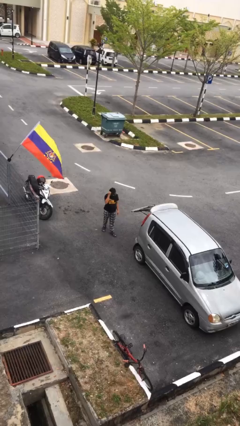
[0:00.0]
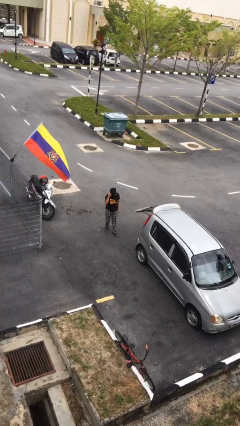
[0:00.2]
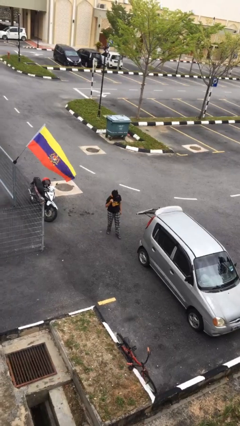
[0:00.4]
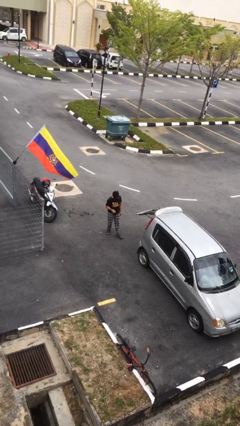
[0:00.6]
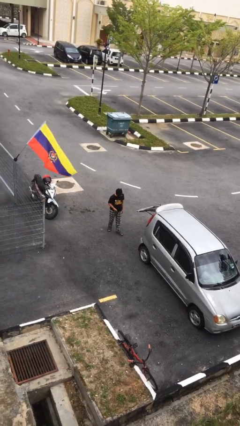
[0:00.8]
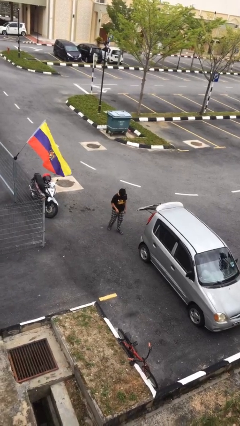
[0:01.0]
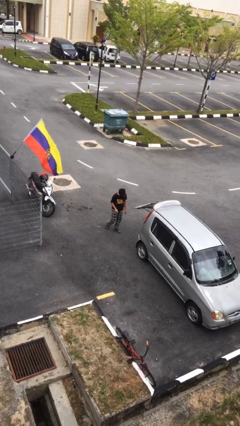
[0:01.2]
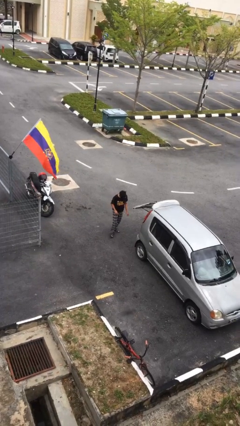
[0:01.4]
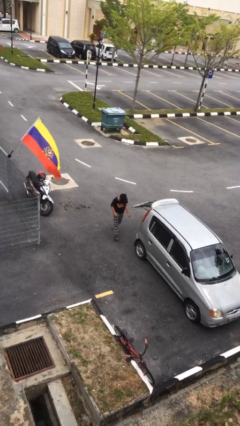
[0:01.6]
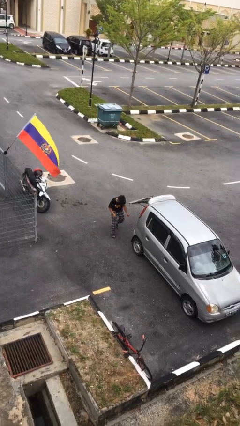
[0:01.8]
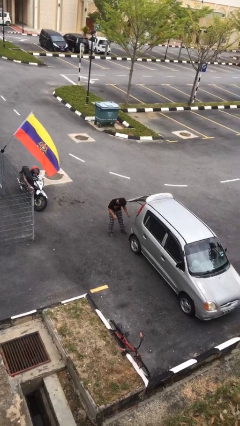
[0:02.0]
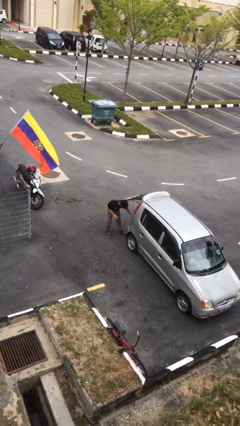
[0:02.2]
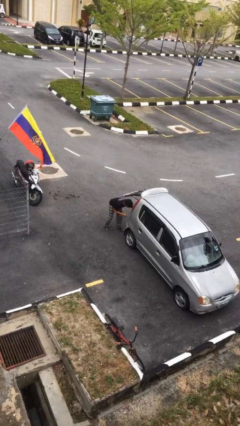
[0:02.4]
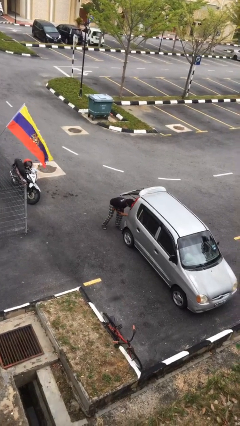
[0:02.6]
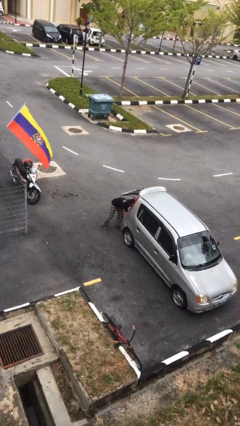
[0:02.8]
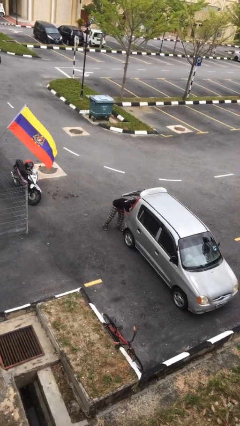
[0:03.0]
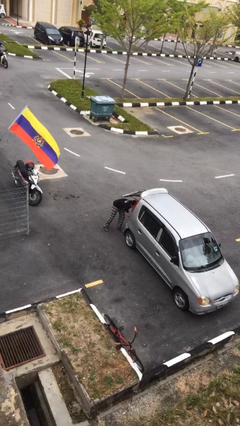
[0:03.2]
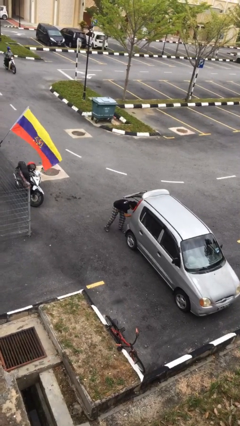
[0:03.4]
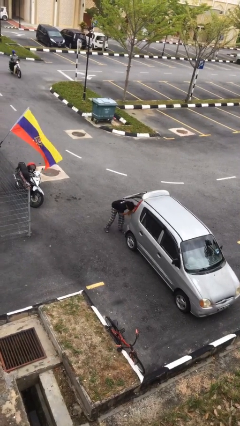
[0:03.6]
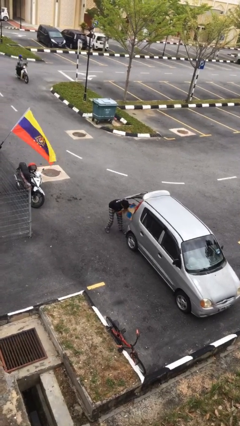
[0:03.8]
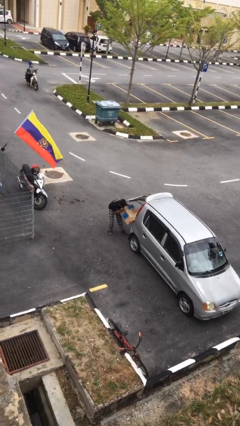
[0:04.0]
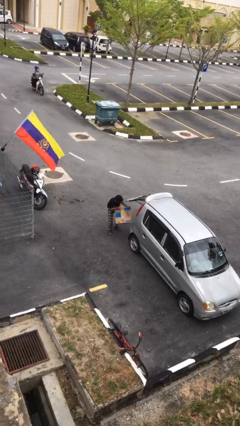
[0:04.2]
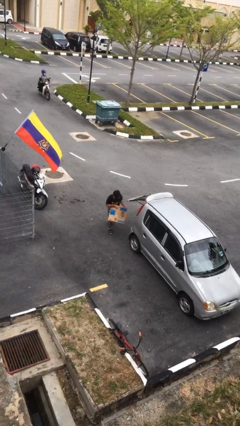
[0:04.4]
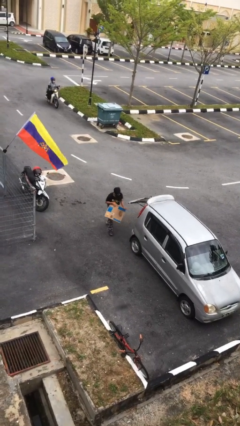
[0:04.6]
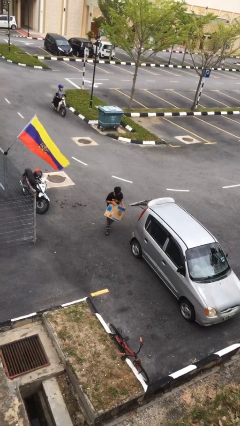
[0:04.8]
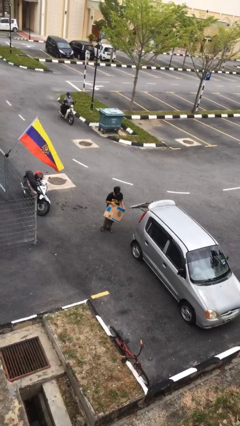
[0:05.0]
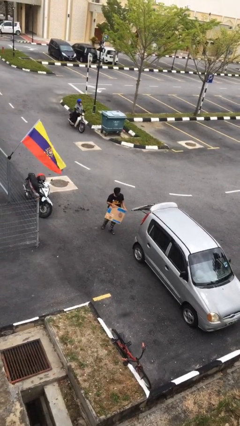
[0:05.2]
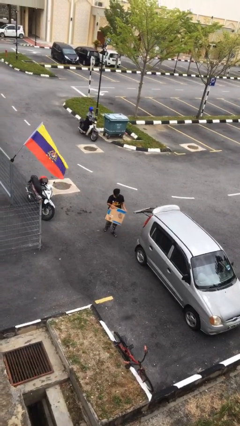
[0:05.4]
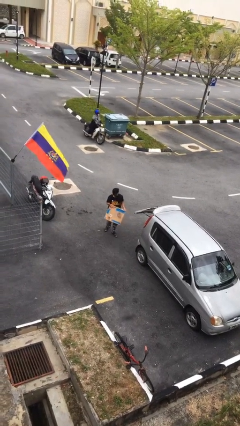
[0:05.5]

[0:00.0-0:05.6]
person unloads car

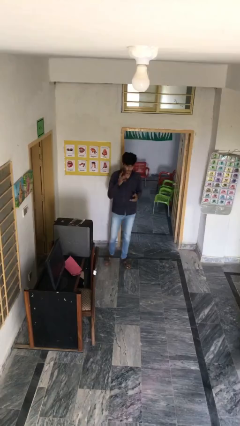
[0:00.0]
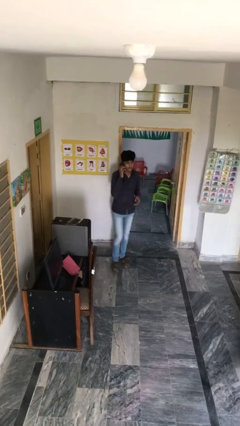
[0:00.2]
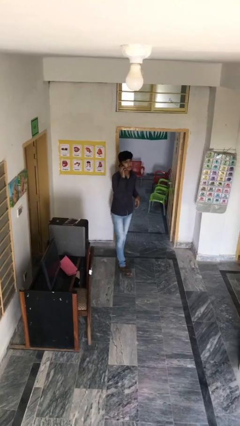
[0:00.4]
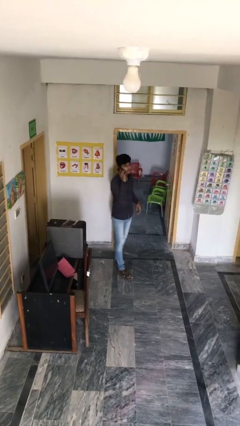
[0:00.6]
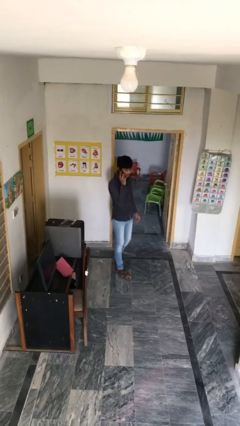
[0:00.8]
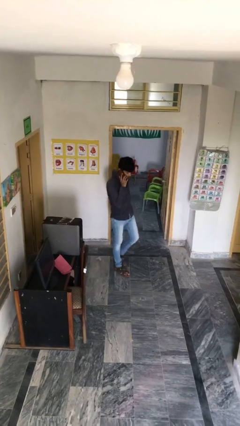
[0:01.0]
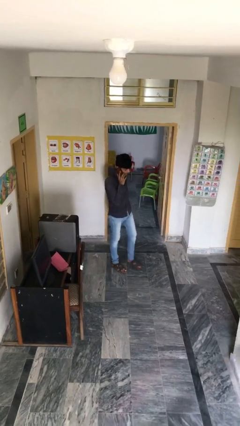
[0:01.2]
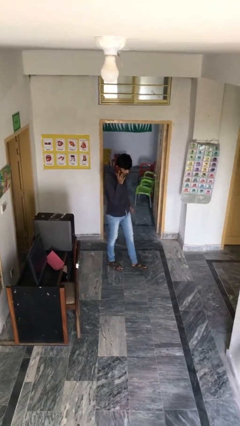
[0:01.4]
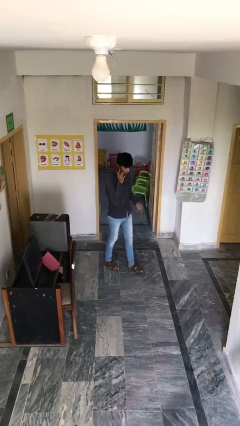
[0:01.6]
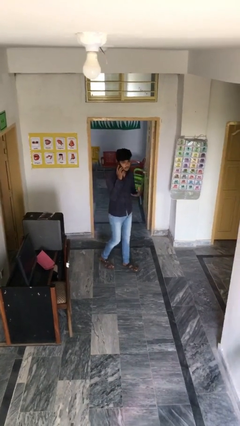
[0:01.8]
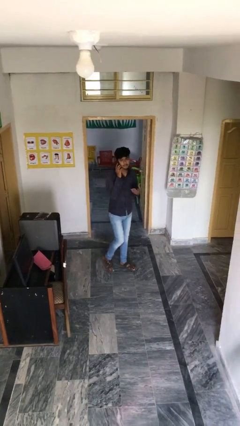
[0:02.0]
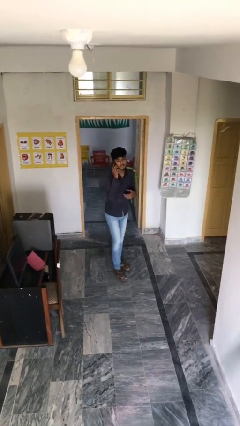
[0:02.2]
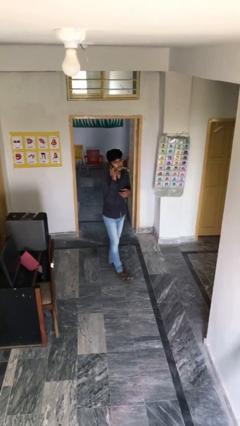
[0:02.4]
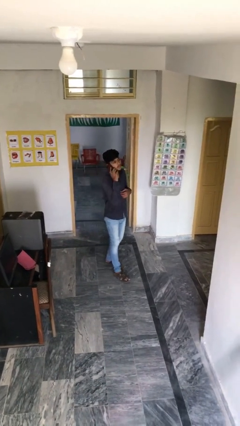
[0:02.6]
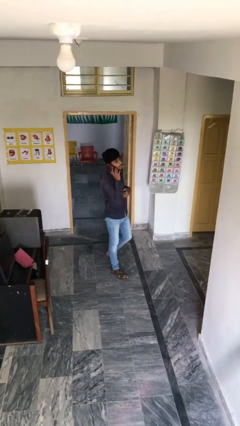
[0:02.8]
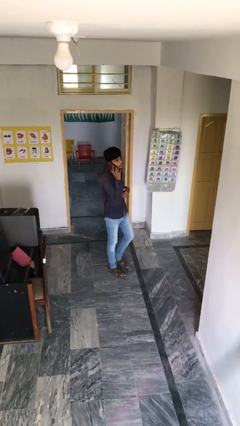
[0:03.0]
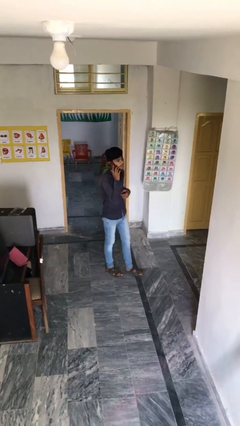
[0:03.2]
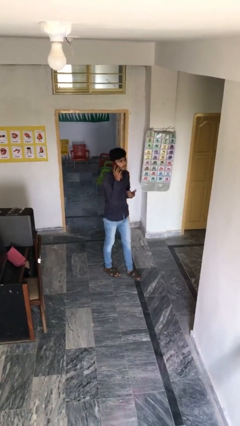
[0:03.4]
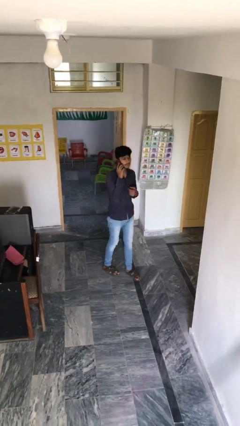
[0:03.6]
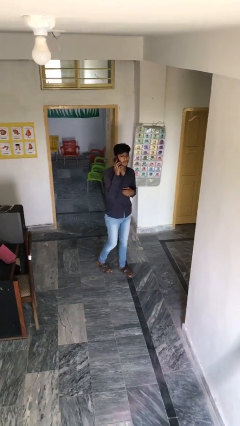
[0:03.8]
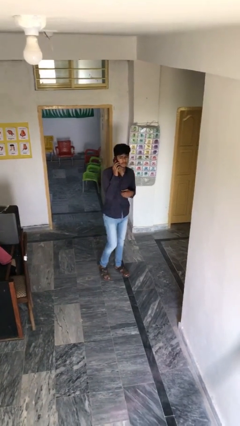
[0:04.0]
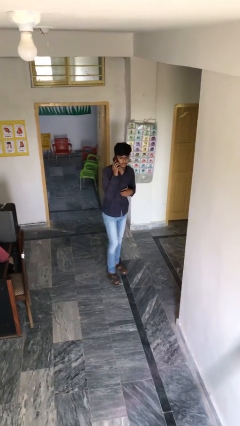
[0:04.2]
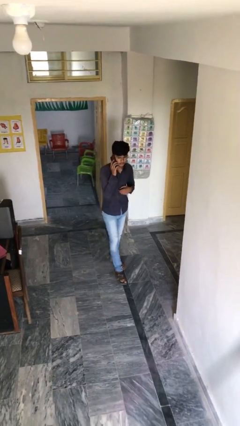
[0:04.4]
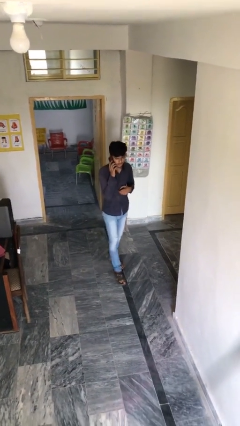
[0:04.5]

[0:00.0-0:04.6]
person talks on phone

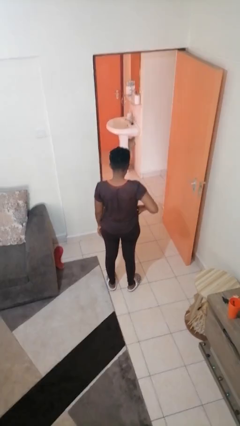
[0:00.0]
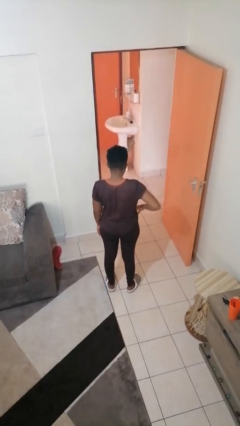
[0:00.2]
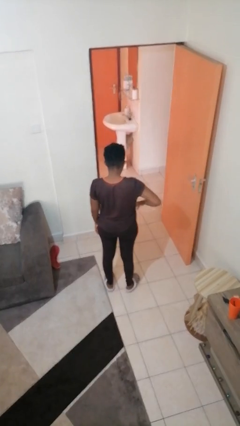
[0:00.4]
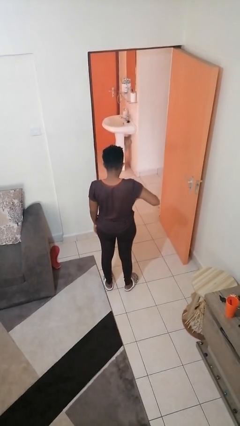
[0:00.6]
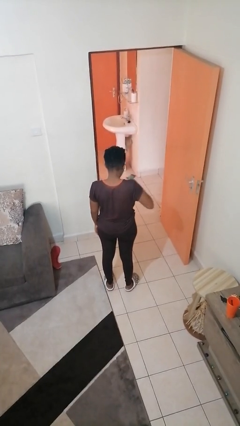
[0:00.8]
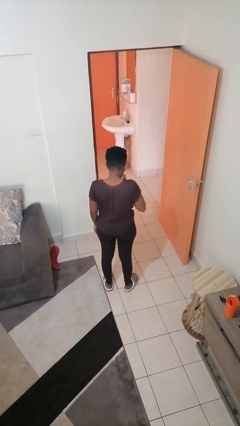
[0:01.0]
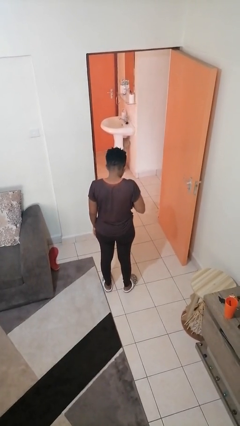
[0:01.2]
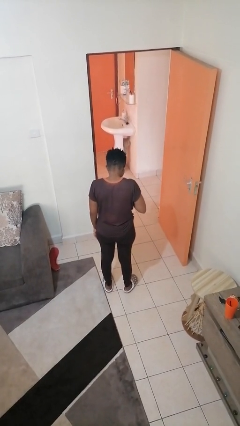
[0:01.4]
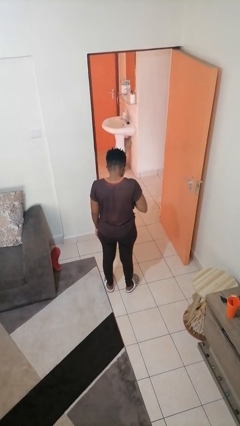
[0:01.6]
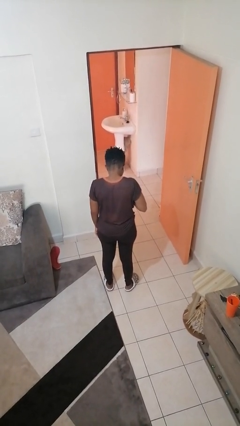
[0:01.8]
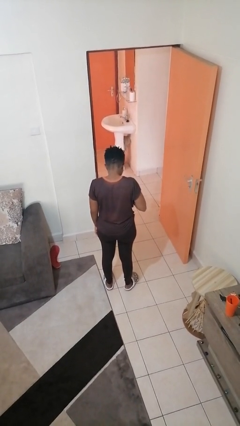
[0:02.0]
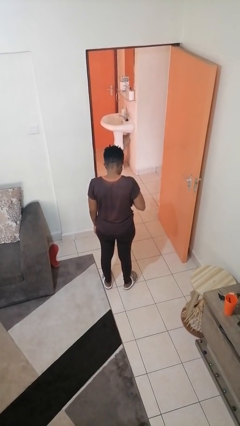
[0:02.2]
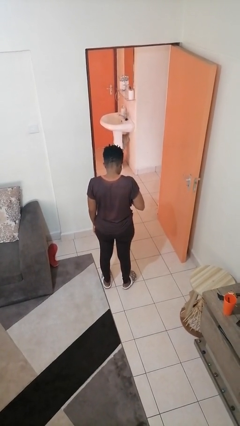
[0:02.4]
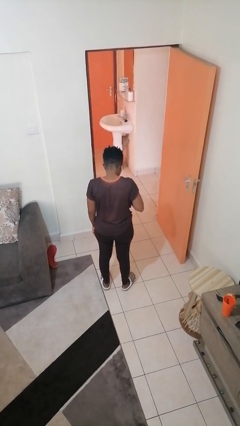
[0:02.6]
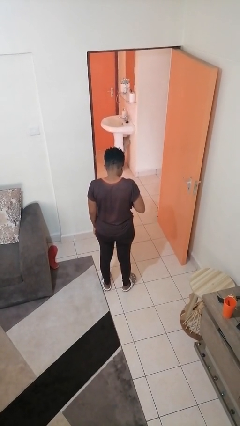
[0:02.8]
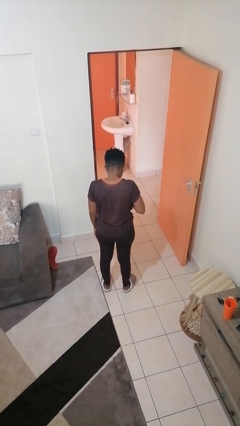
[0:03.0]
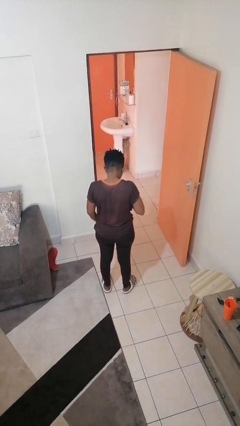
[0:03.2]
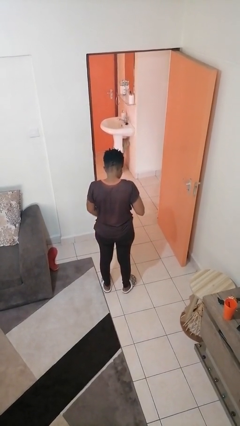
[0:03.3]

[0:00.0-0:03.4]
person takes phone from pocket

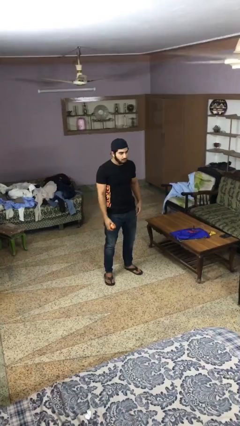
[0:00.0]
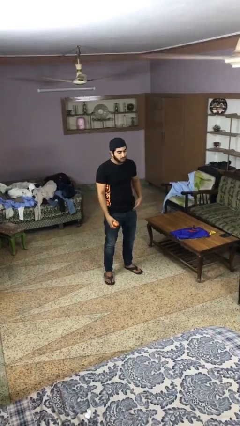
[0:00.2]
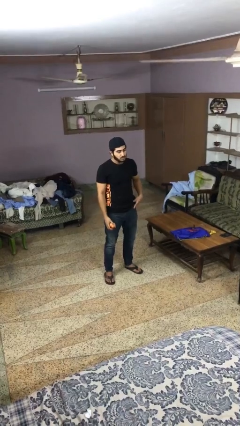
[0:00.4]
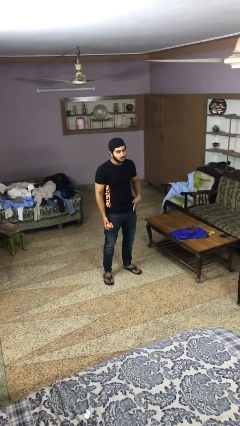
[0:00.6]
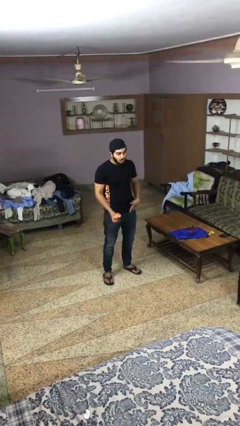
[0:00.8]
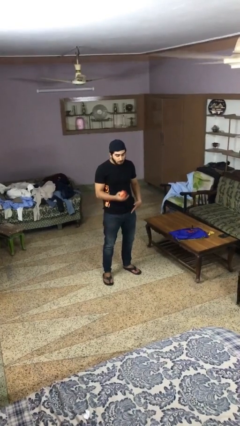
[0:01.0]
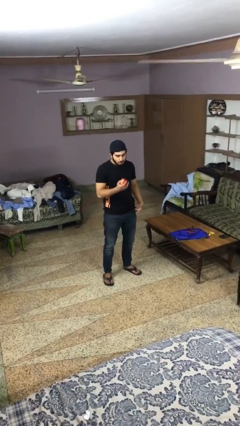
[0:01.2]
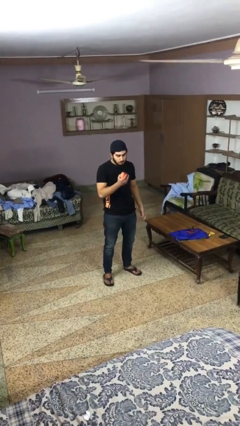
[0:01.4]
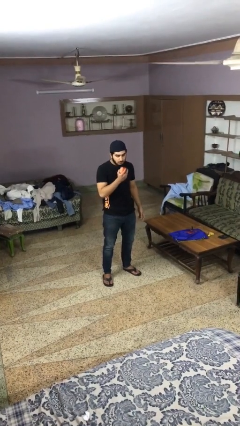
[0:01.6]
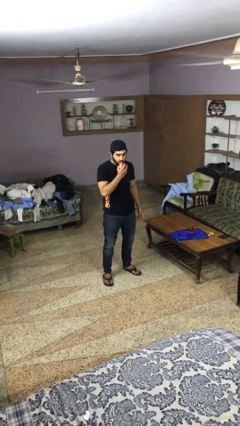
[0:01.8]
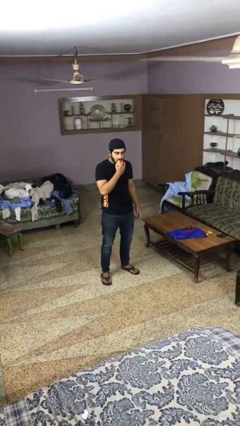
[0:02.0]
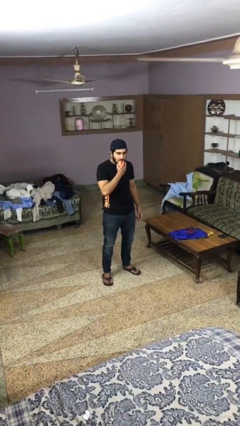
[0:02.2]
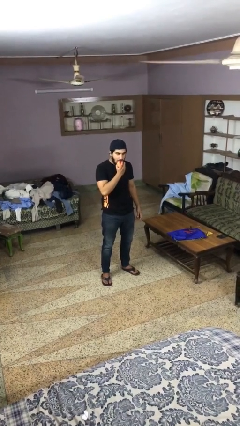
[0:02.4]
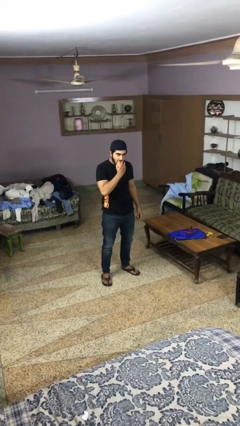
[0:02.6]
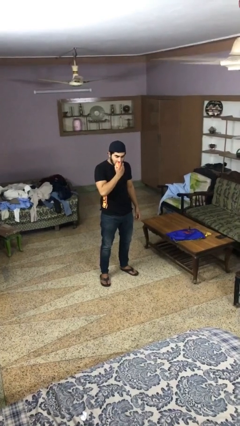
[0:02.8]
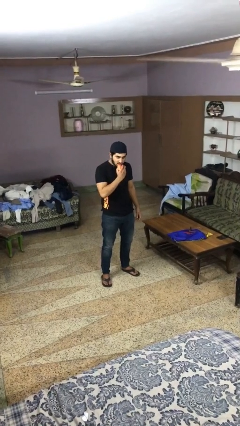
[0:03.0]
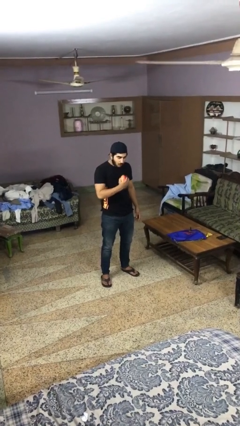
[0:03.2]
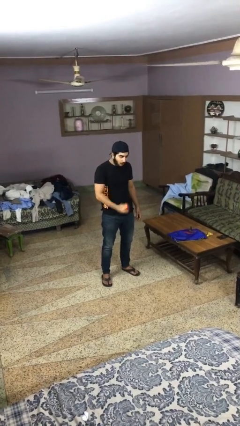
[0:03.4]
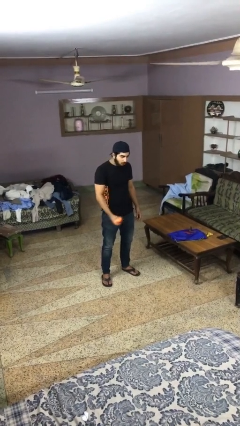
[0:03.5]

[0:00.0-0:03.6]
person eats apple

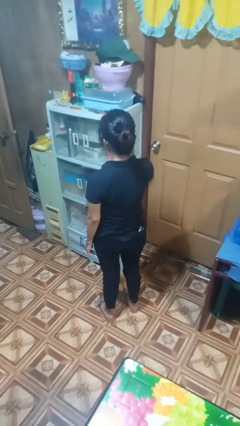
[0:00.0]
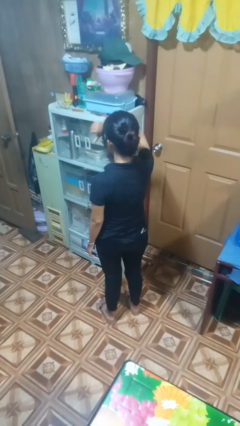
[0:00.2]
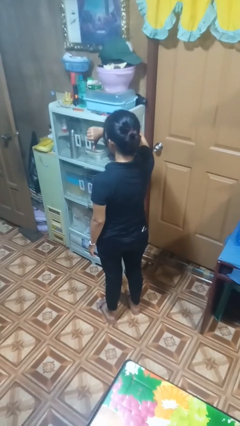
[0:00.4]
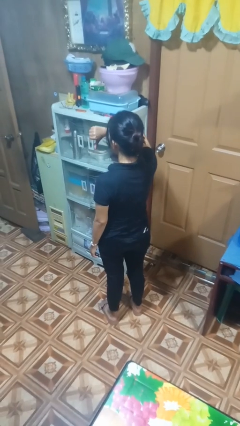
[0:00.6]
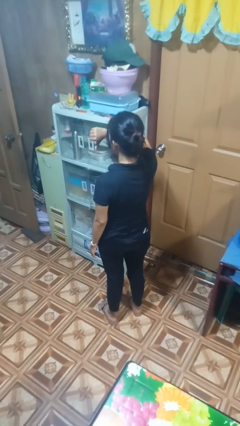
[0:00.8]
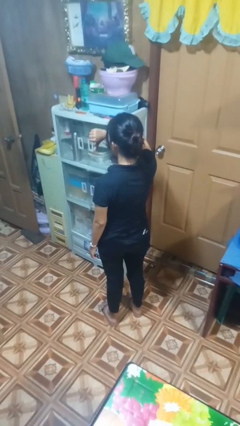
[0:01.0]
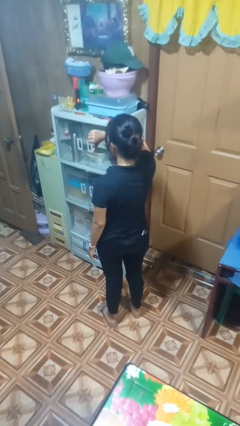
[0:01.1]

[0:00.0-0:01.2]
person gestures thumbs down
